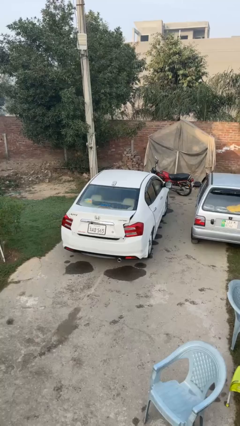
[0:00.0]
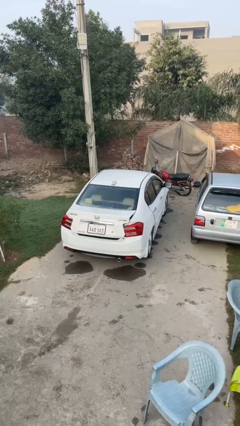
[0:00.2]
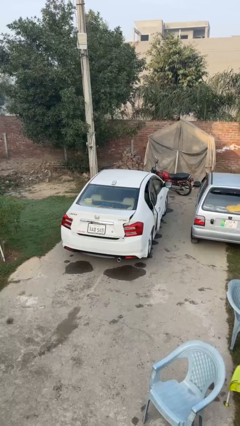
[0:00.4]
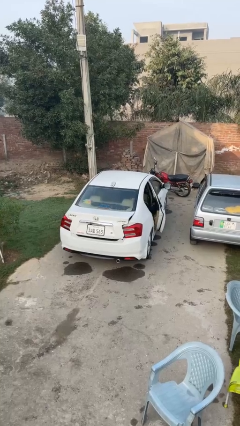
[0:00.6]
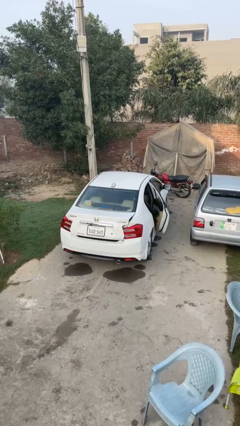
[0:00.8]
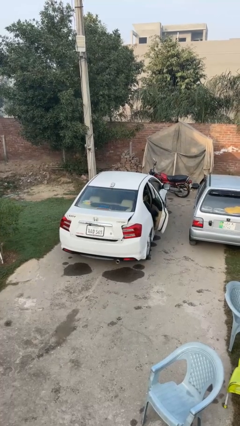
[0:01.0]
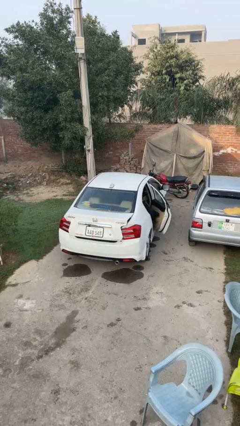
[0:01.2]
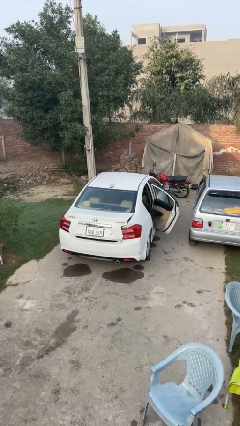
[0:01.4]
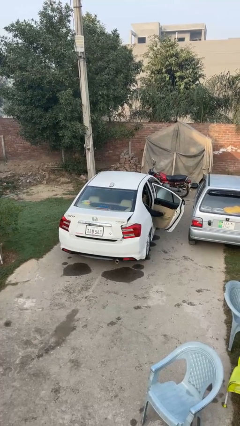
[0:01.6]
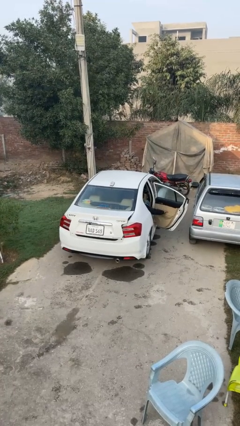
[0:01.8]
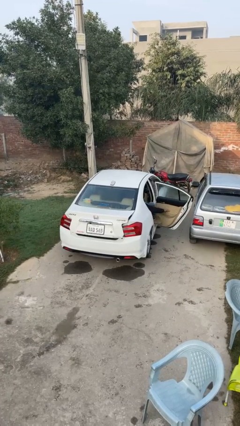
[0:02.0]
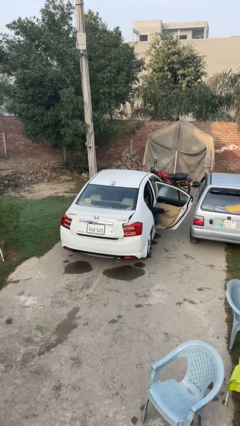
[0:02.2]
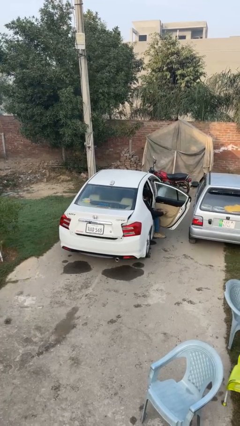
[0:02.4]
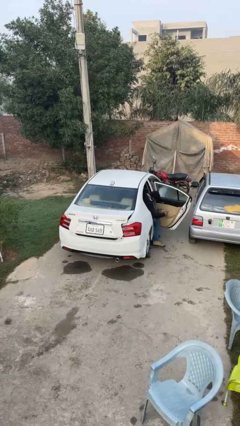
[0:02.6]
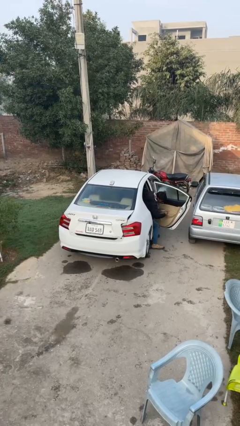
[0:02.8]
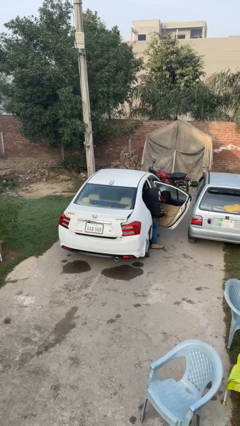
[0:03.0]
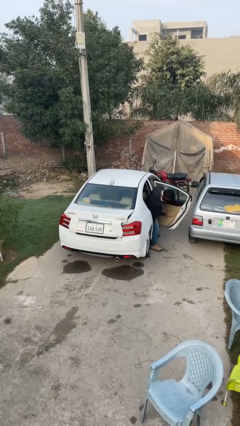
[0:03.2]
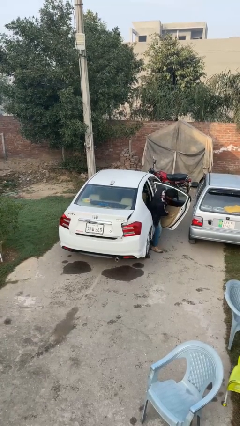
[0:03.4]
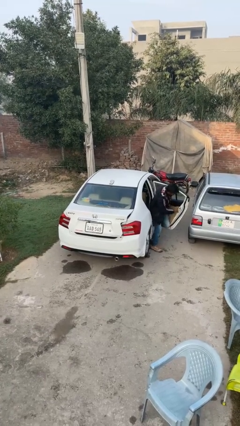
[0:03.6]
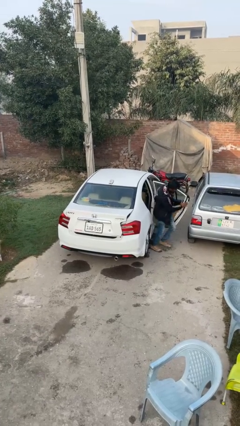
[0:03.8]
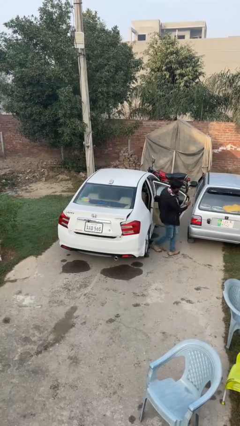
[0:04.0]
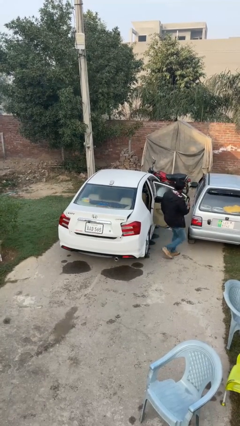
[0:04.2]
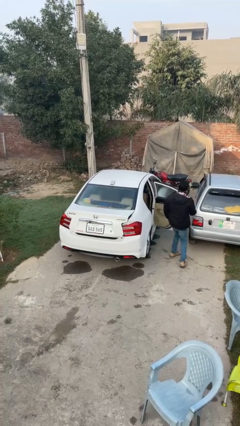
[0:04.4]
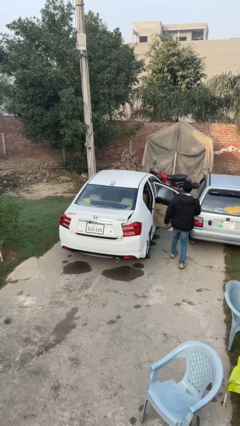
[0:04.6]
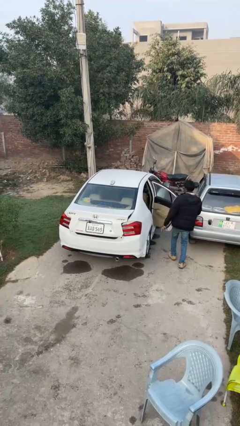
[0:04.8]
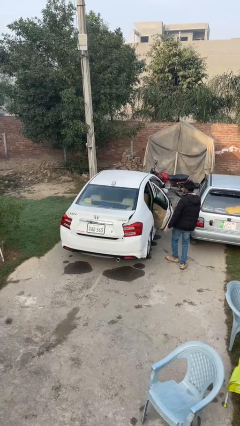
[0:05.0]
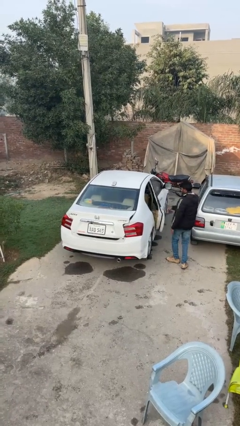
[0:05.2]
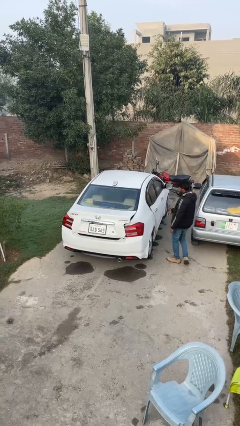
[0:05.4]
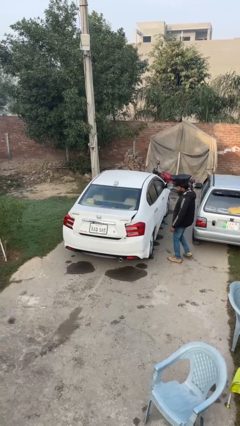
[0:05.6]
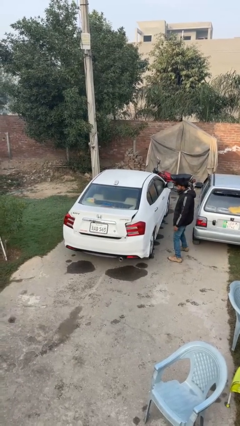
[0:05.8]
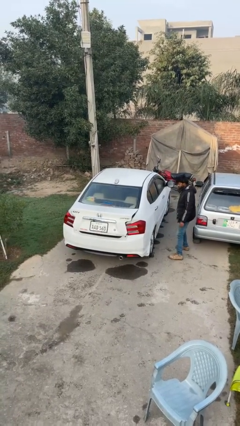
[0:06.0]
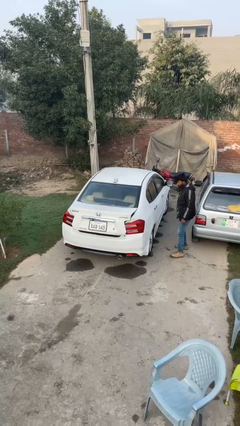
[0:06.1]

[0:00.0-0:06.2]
car drops off person

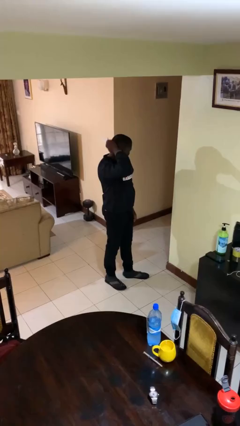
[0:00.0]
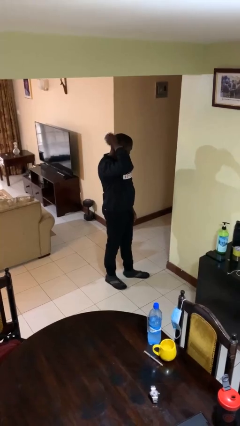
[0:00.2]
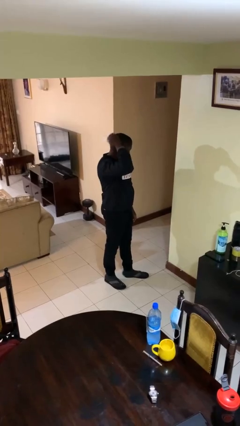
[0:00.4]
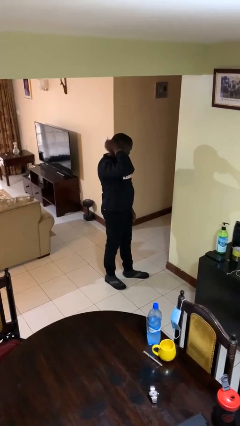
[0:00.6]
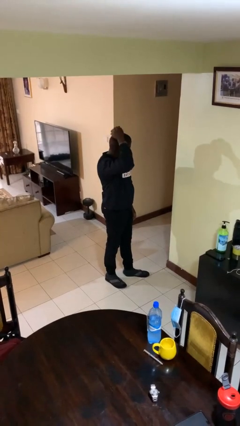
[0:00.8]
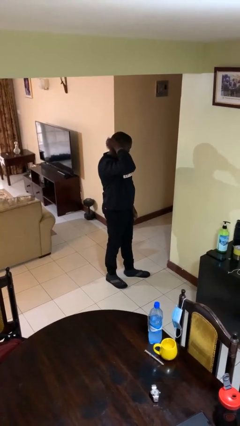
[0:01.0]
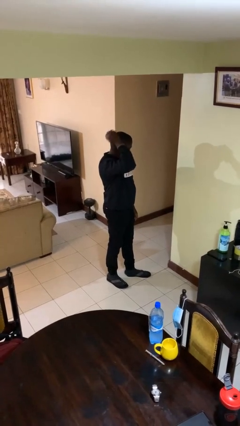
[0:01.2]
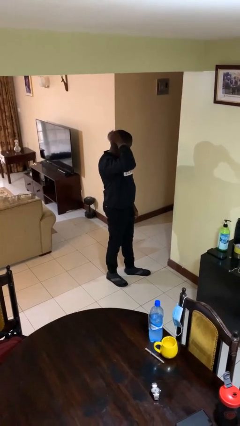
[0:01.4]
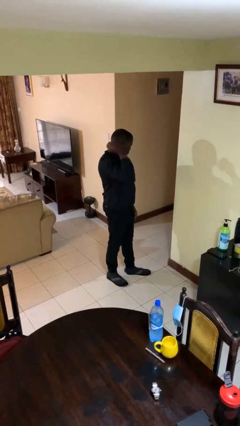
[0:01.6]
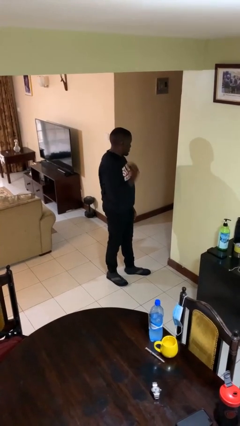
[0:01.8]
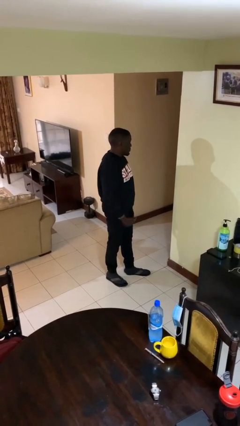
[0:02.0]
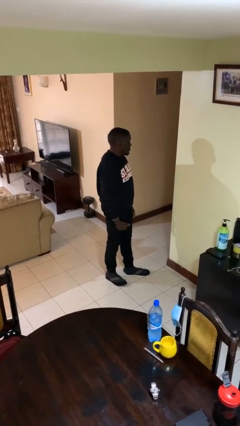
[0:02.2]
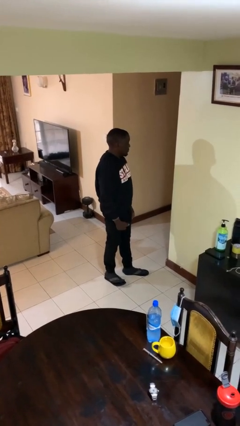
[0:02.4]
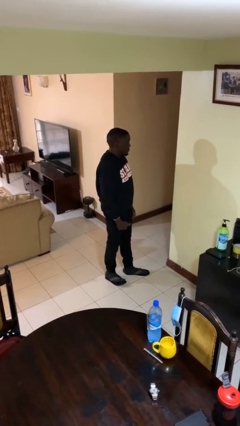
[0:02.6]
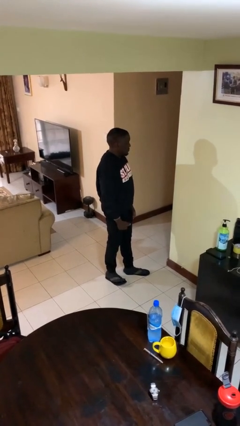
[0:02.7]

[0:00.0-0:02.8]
person brushes hair

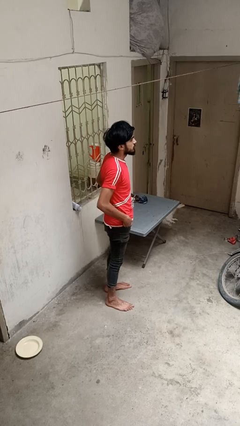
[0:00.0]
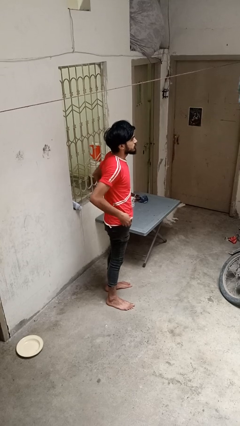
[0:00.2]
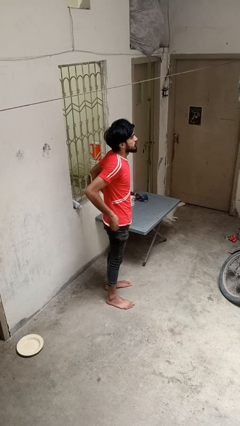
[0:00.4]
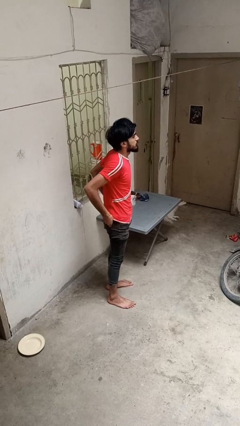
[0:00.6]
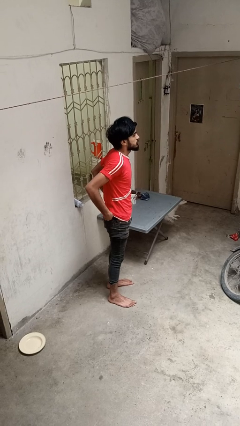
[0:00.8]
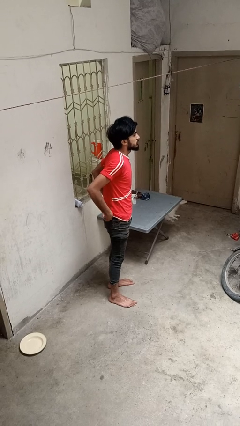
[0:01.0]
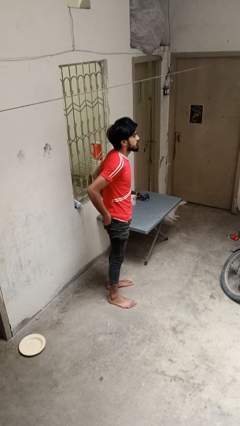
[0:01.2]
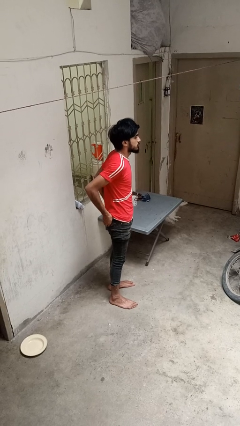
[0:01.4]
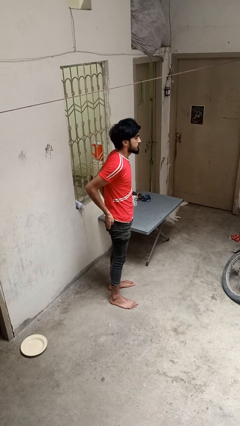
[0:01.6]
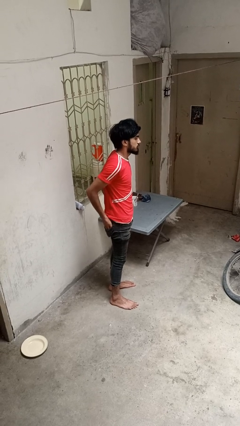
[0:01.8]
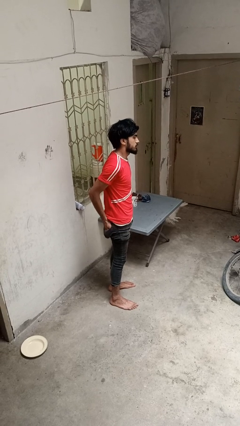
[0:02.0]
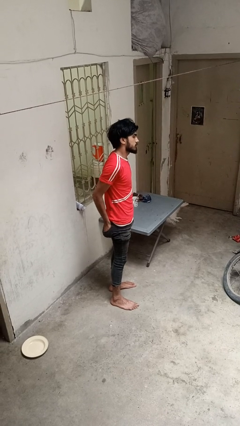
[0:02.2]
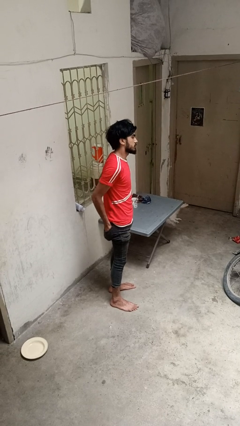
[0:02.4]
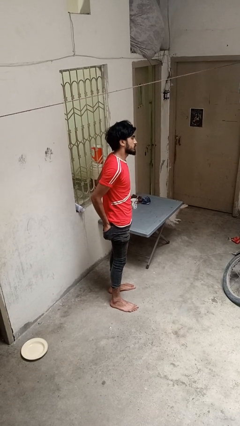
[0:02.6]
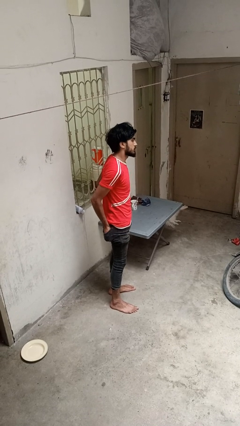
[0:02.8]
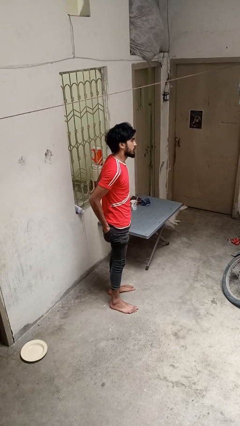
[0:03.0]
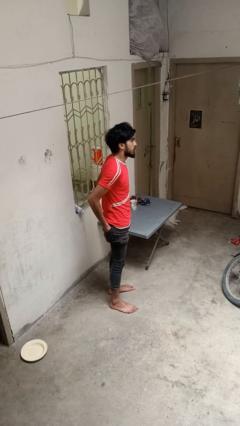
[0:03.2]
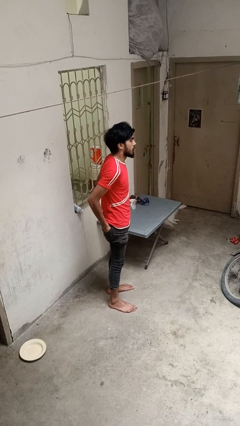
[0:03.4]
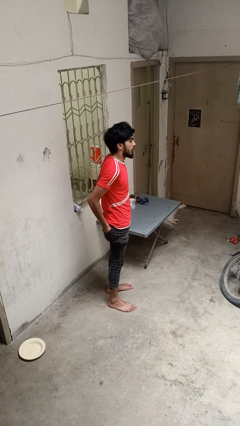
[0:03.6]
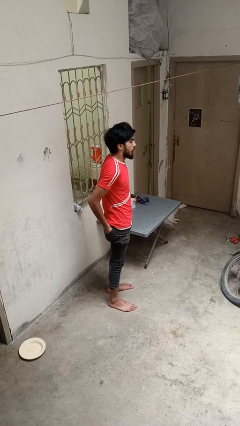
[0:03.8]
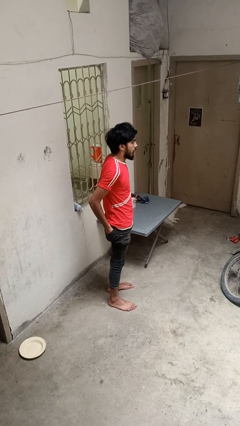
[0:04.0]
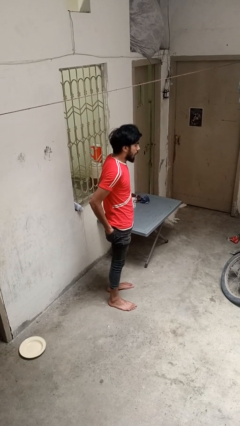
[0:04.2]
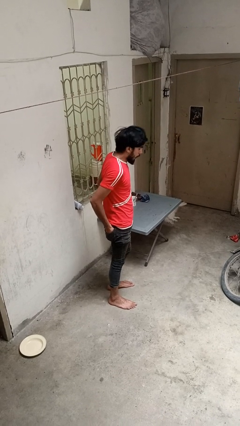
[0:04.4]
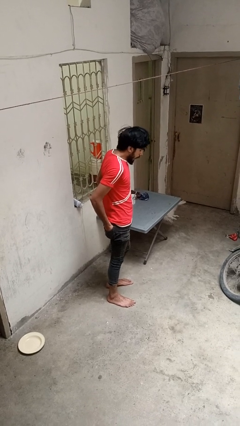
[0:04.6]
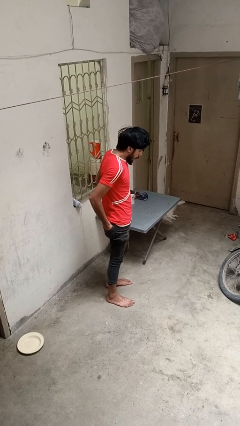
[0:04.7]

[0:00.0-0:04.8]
person puts hands in back pockets

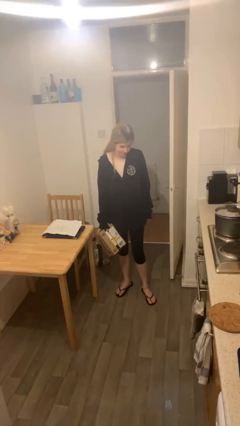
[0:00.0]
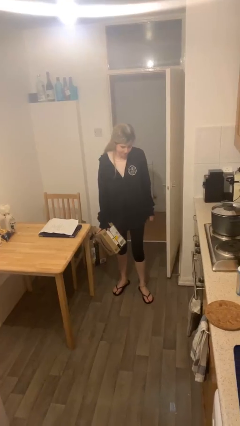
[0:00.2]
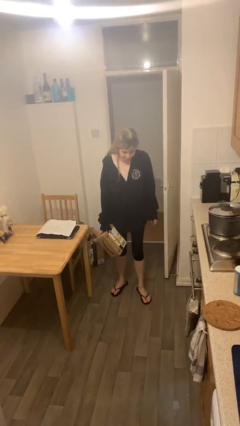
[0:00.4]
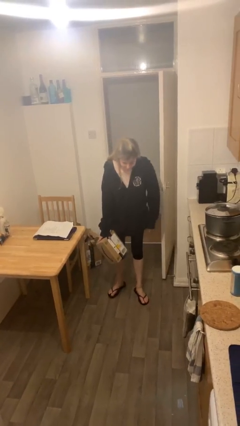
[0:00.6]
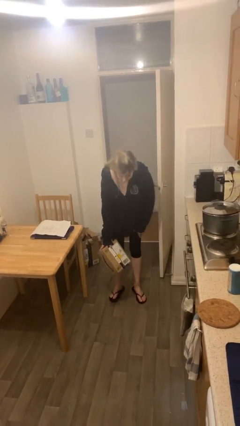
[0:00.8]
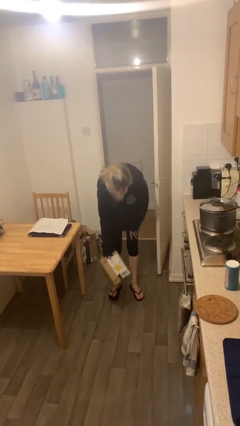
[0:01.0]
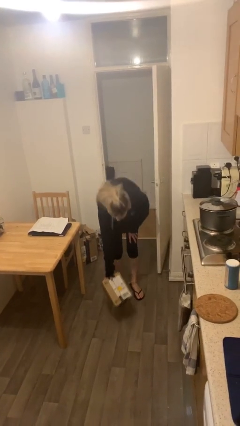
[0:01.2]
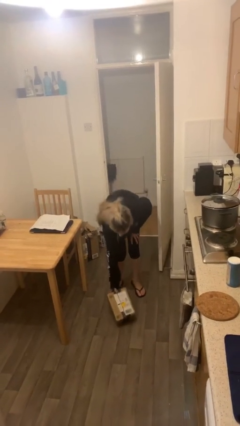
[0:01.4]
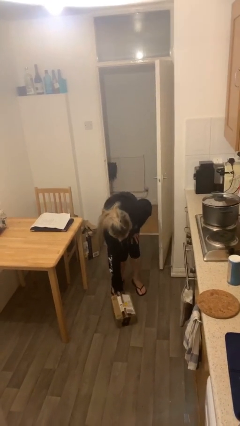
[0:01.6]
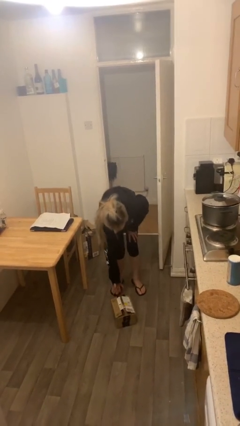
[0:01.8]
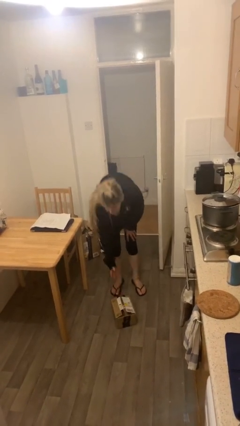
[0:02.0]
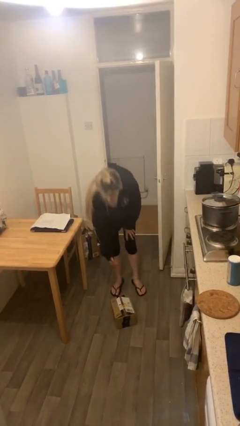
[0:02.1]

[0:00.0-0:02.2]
person puts down object on floor

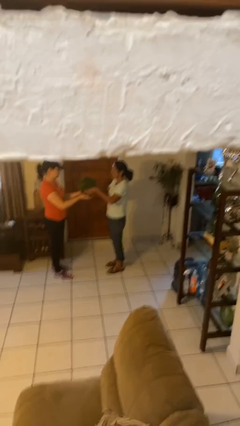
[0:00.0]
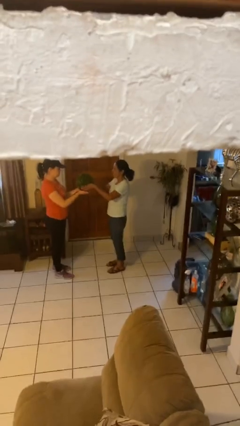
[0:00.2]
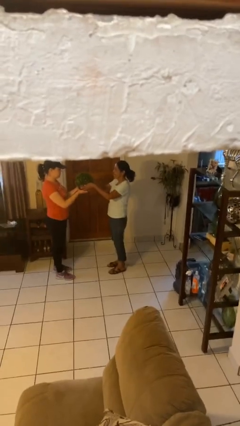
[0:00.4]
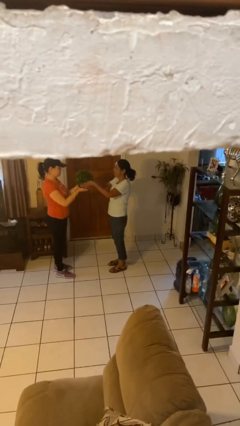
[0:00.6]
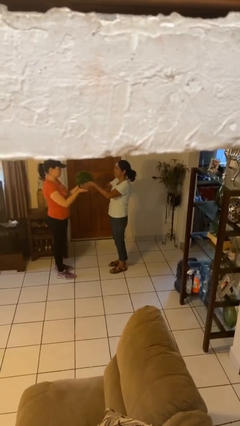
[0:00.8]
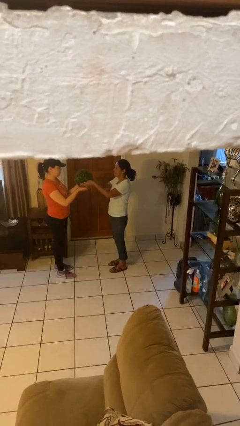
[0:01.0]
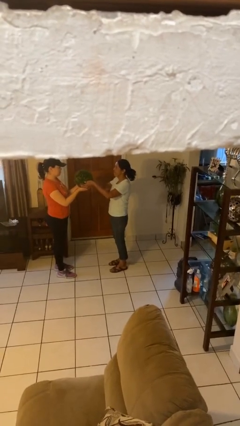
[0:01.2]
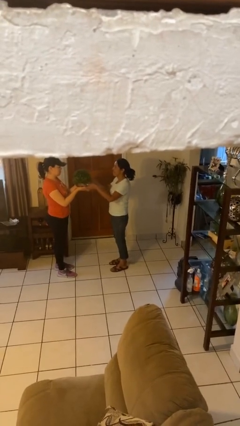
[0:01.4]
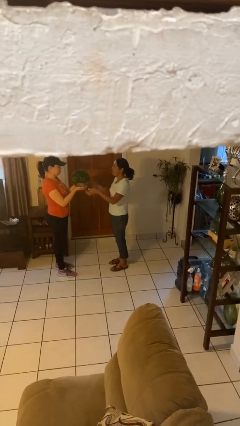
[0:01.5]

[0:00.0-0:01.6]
person transfers object to person
